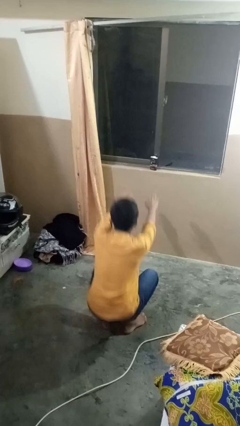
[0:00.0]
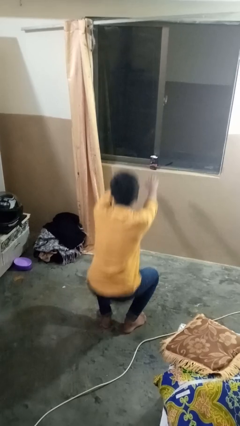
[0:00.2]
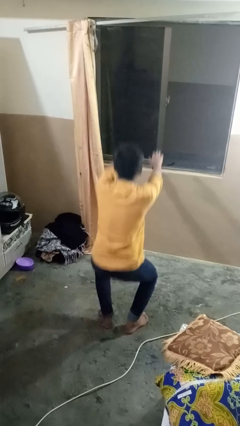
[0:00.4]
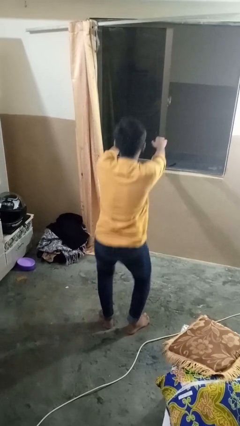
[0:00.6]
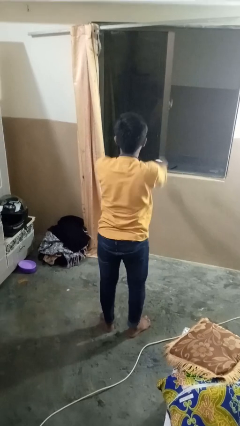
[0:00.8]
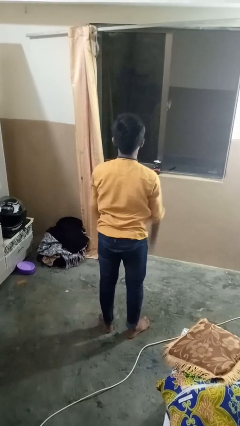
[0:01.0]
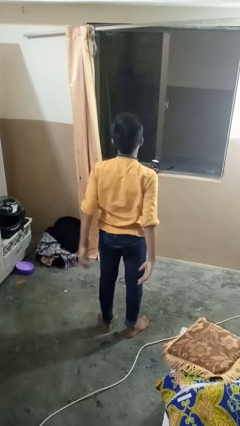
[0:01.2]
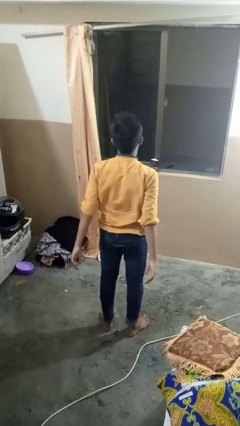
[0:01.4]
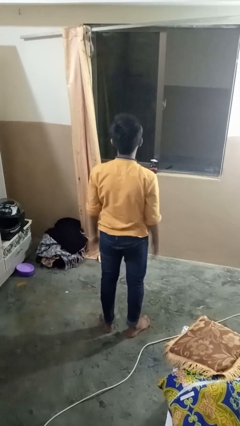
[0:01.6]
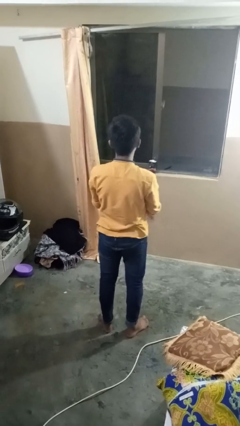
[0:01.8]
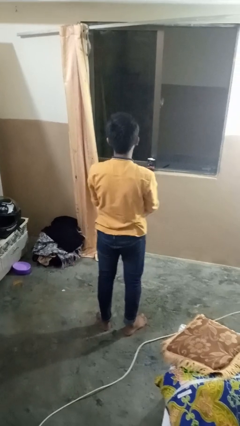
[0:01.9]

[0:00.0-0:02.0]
person stands up

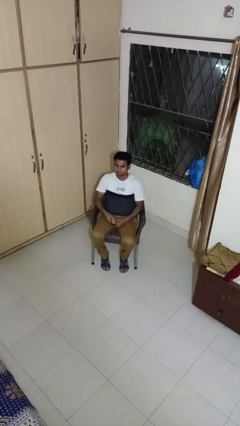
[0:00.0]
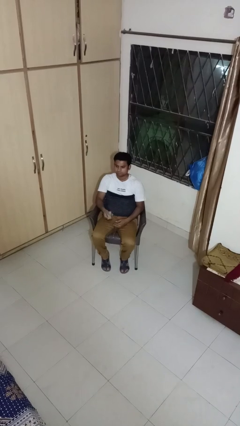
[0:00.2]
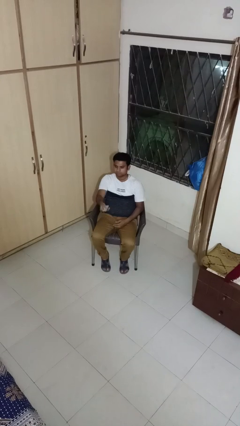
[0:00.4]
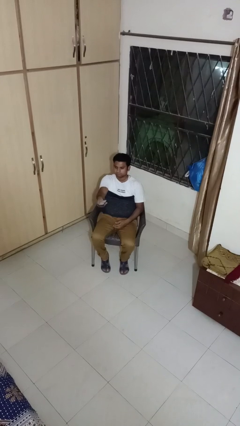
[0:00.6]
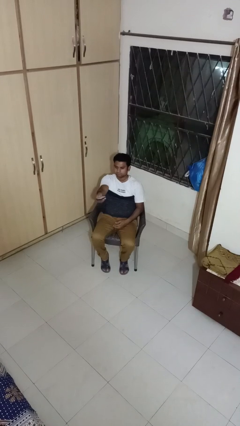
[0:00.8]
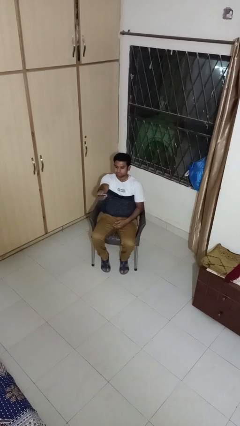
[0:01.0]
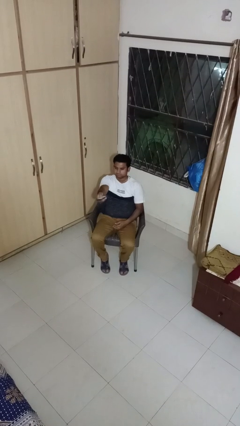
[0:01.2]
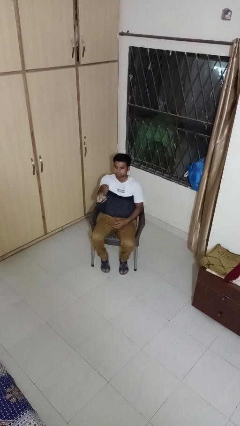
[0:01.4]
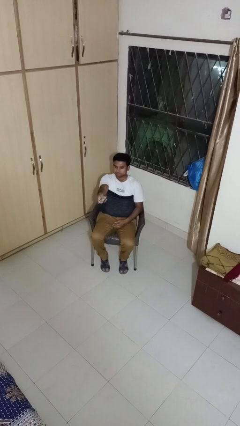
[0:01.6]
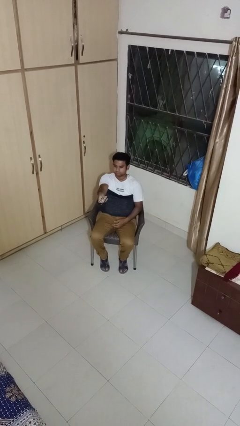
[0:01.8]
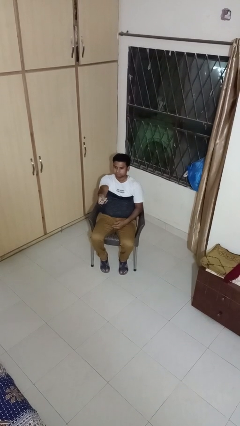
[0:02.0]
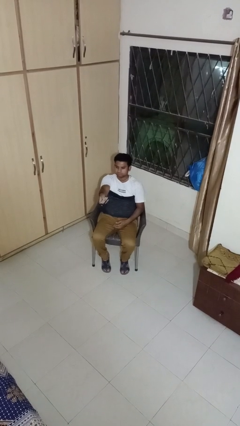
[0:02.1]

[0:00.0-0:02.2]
person uses television remote

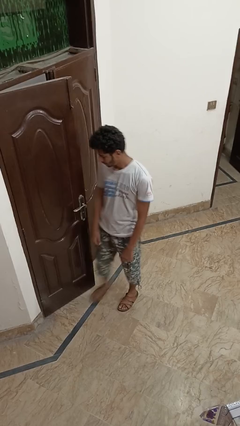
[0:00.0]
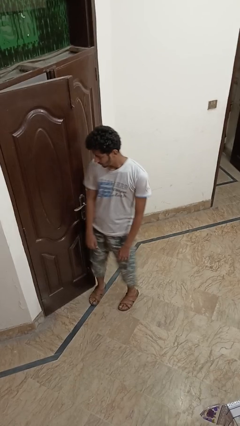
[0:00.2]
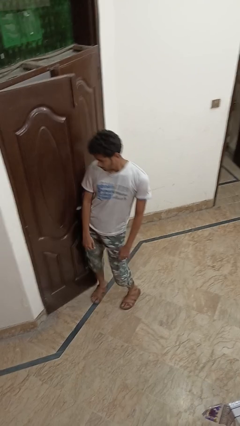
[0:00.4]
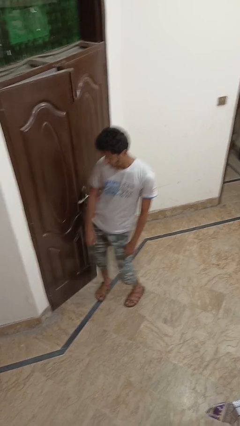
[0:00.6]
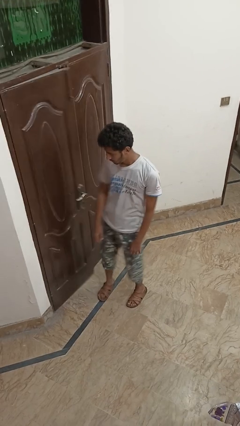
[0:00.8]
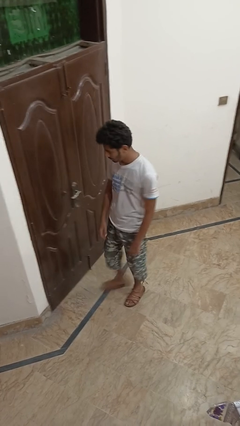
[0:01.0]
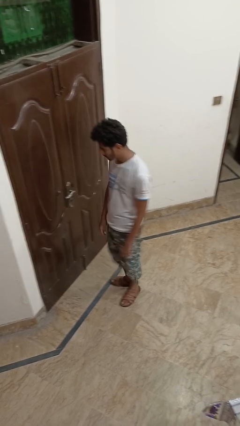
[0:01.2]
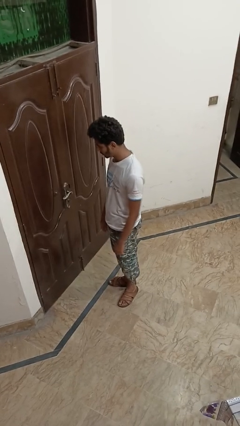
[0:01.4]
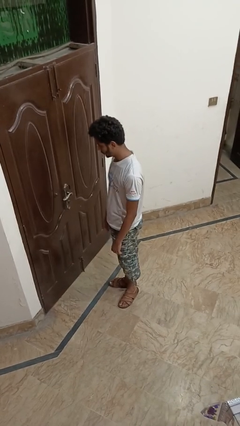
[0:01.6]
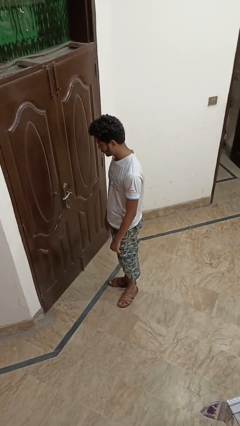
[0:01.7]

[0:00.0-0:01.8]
person closes door with hip

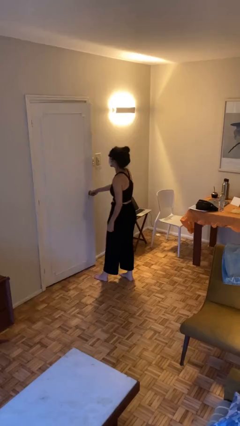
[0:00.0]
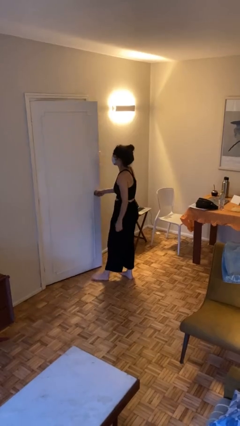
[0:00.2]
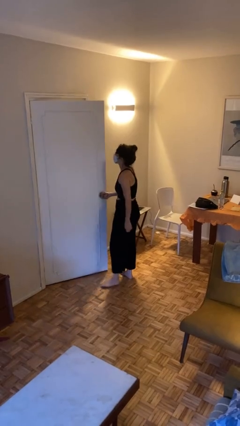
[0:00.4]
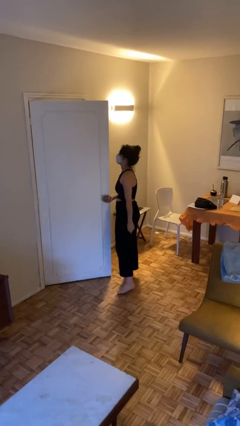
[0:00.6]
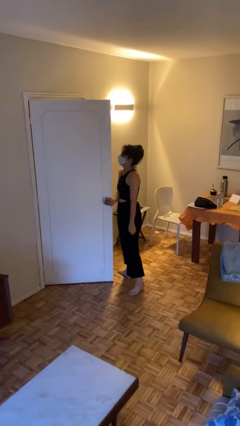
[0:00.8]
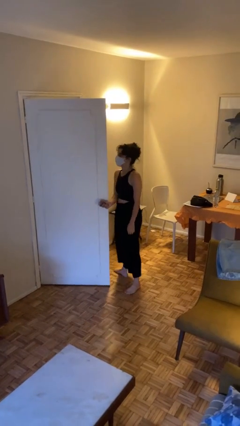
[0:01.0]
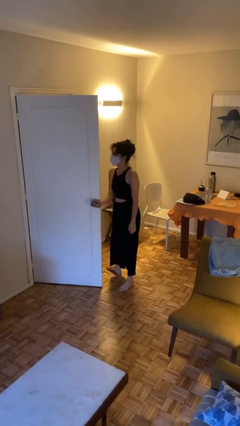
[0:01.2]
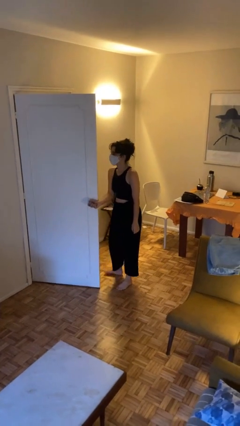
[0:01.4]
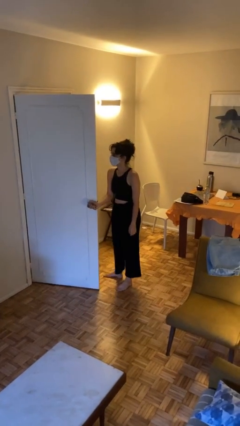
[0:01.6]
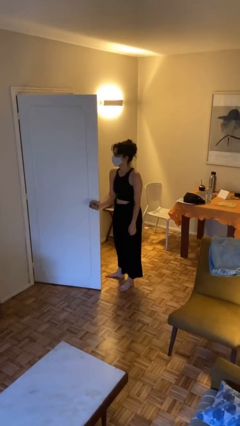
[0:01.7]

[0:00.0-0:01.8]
person opens facility door

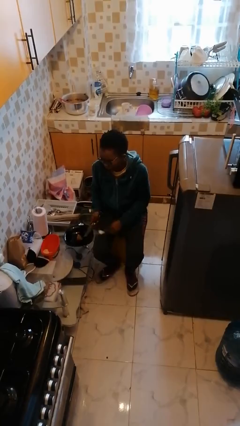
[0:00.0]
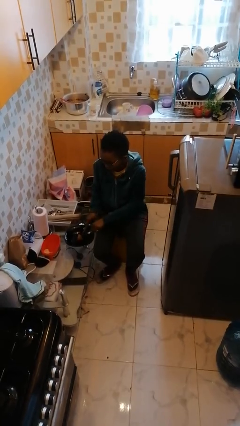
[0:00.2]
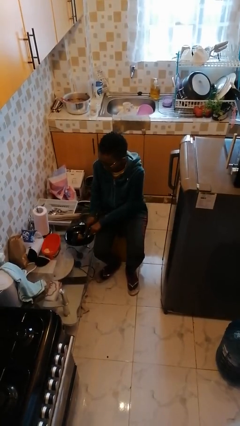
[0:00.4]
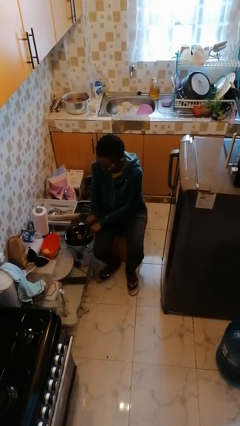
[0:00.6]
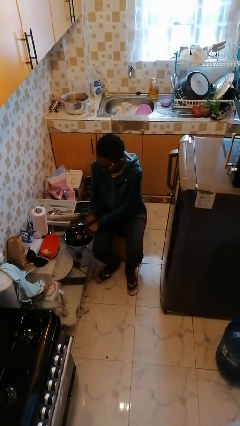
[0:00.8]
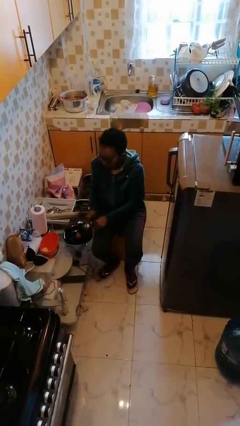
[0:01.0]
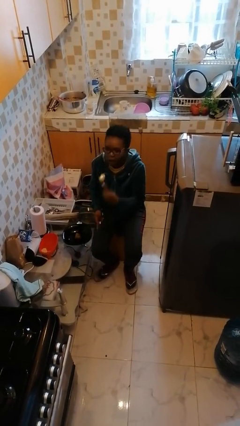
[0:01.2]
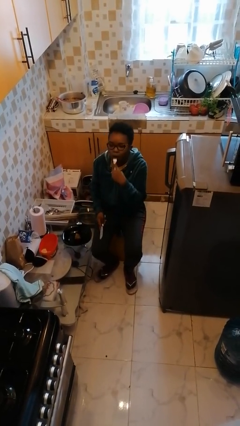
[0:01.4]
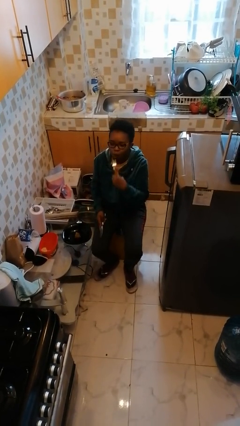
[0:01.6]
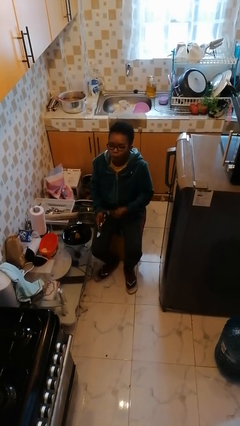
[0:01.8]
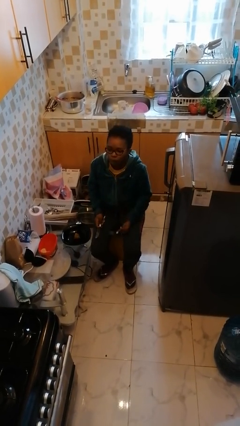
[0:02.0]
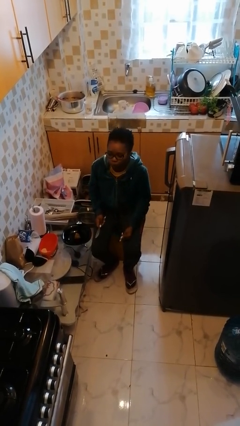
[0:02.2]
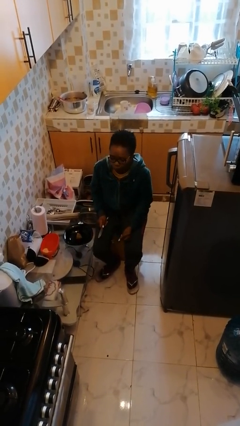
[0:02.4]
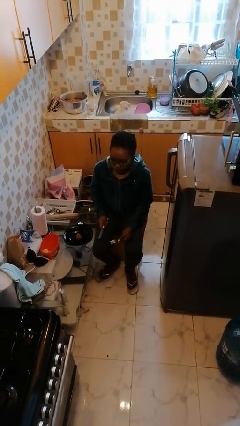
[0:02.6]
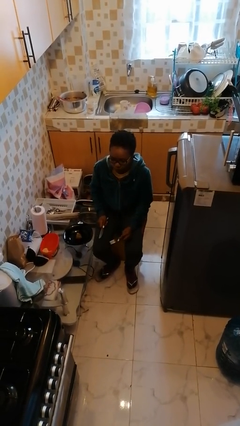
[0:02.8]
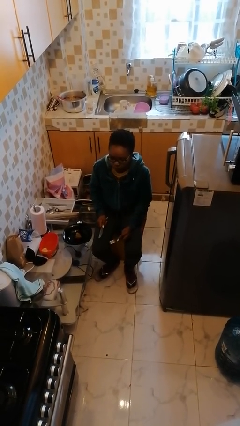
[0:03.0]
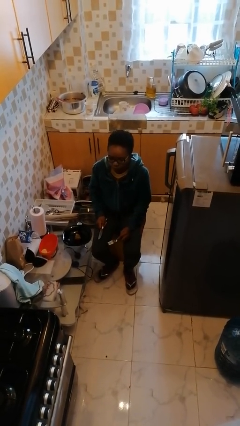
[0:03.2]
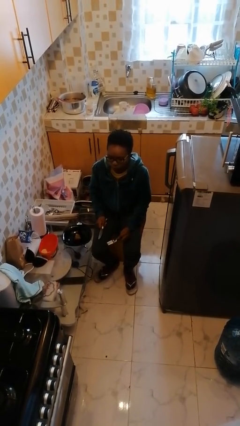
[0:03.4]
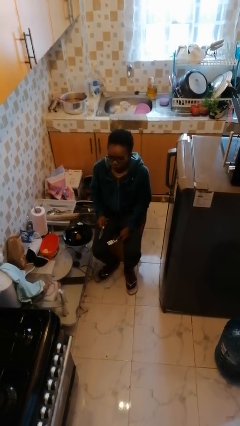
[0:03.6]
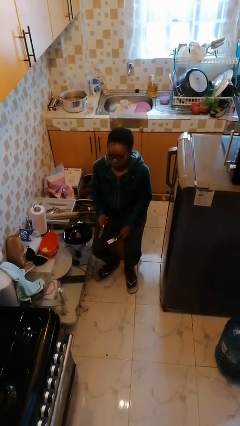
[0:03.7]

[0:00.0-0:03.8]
person eats with utensil

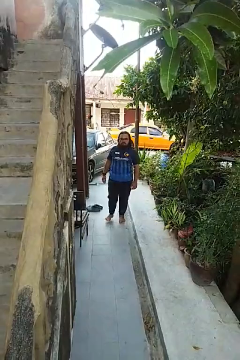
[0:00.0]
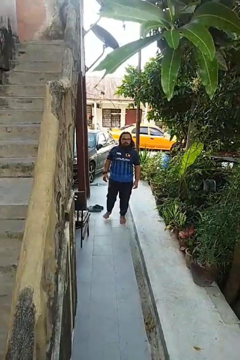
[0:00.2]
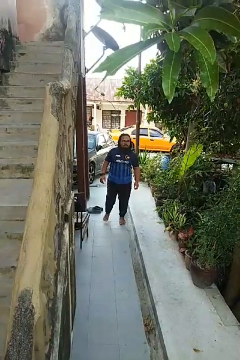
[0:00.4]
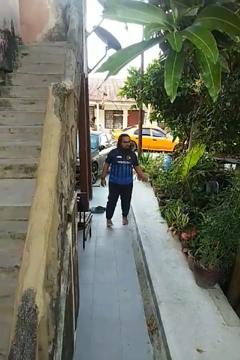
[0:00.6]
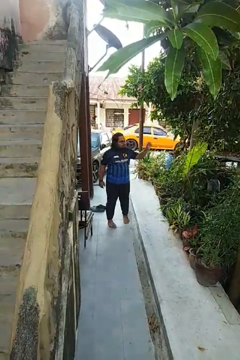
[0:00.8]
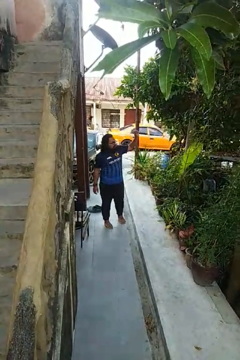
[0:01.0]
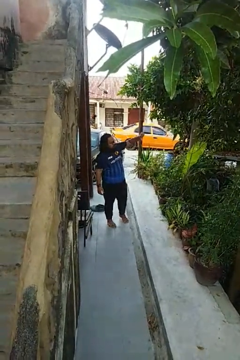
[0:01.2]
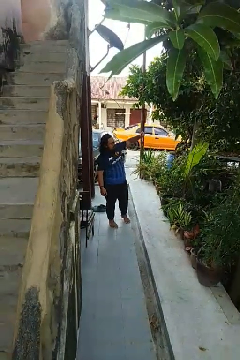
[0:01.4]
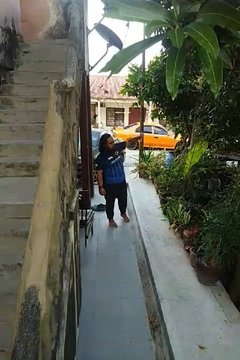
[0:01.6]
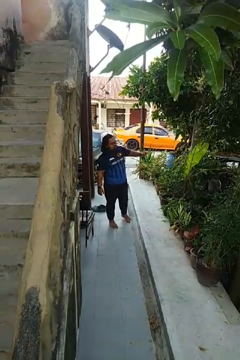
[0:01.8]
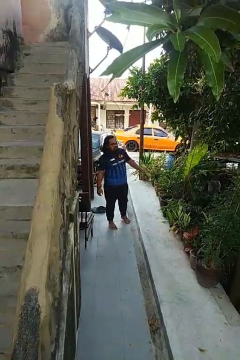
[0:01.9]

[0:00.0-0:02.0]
person gestures thumbs down

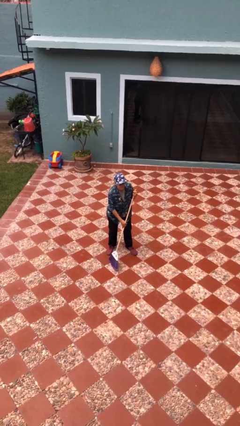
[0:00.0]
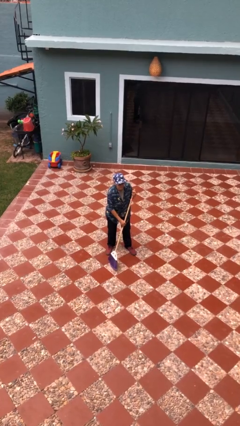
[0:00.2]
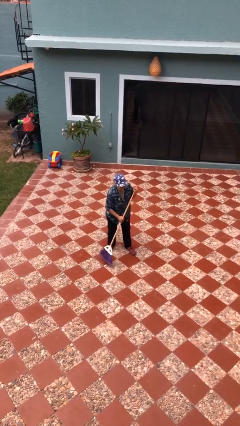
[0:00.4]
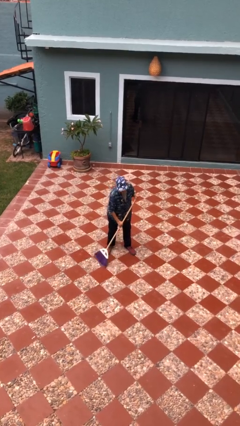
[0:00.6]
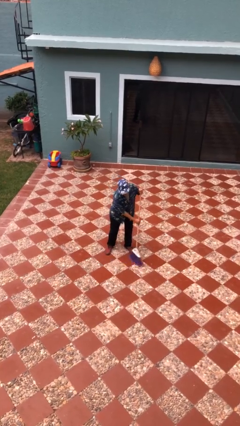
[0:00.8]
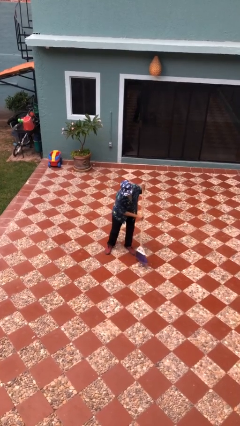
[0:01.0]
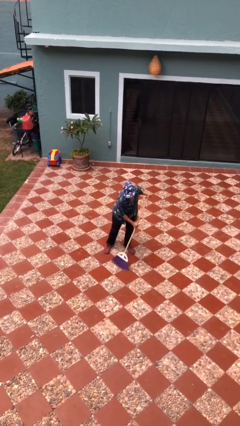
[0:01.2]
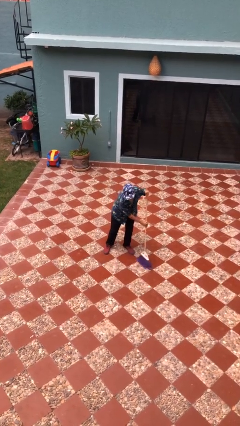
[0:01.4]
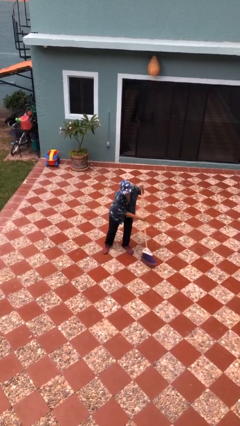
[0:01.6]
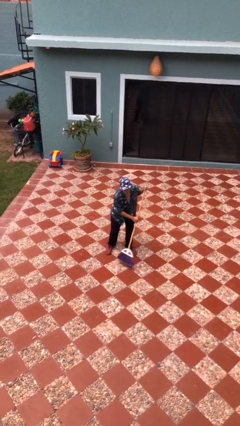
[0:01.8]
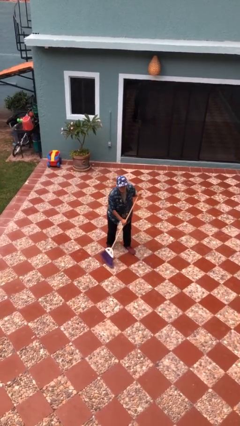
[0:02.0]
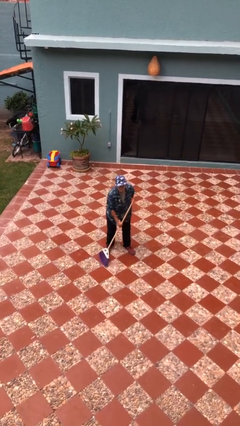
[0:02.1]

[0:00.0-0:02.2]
person sweeps floor

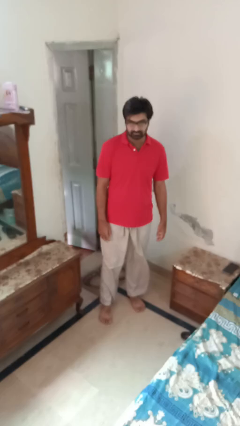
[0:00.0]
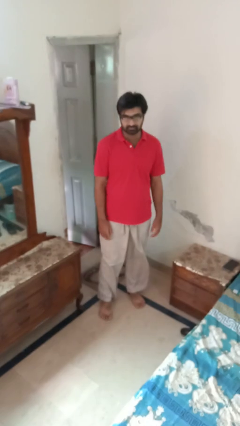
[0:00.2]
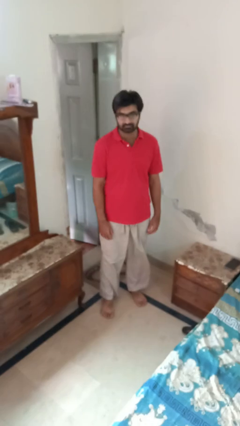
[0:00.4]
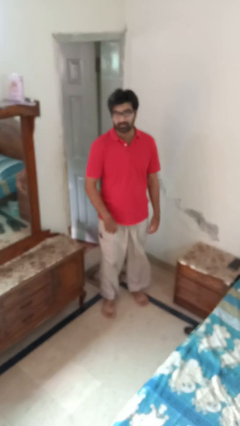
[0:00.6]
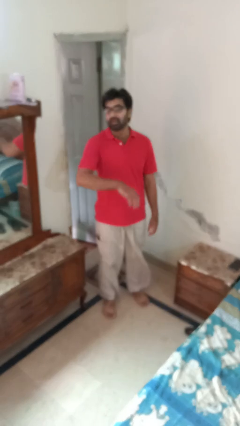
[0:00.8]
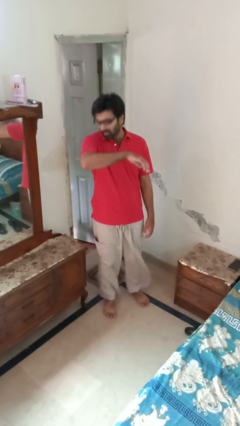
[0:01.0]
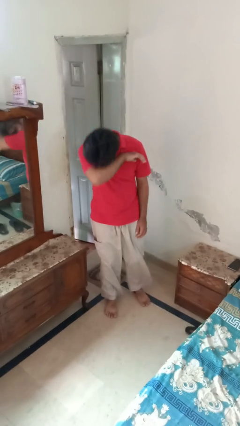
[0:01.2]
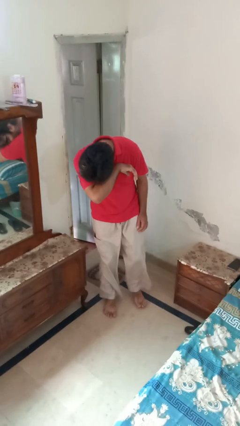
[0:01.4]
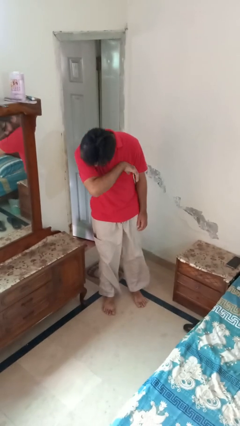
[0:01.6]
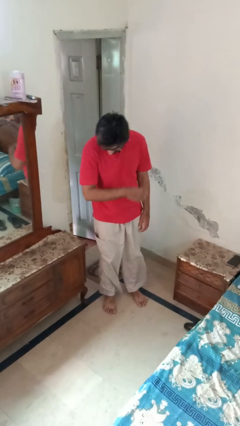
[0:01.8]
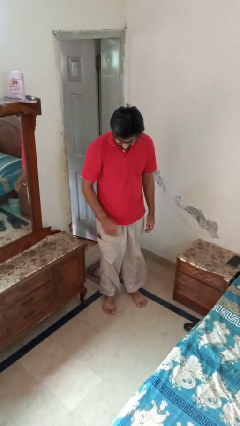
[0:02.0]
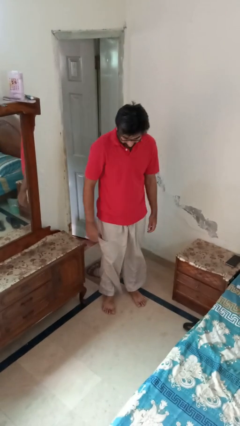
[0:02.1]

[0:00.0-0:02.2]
person sneezes into arm
